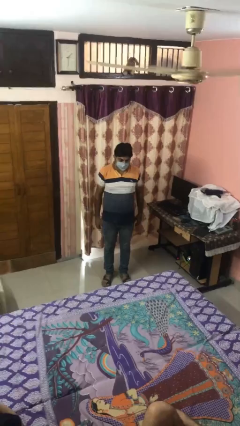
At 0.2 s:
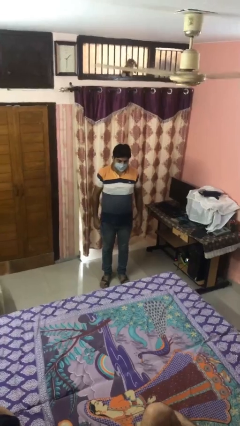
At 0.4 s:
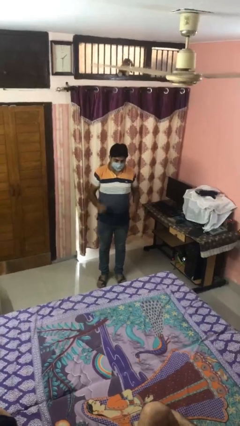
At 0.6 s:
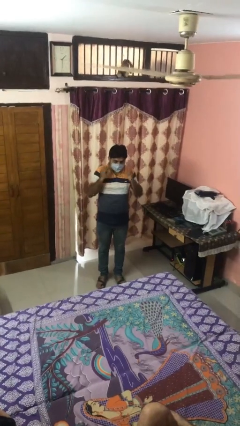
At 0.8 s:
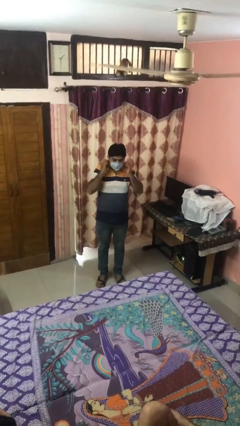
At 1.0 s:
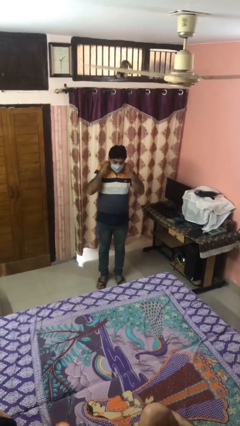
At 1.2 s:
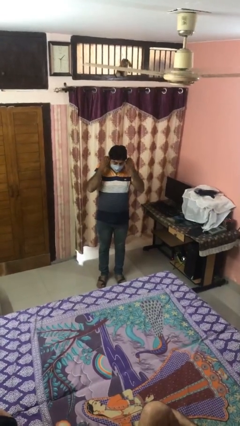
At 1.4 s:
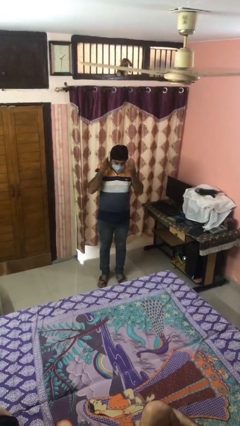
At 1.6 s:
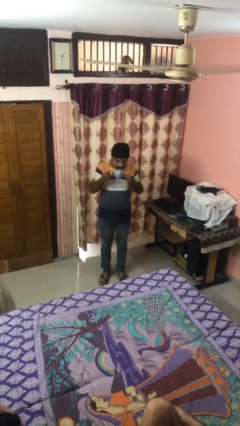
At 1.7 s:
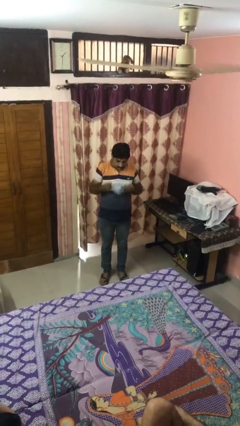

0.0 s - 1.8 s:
person takes off facemask

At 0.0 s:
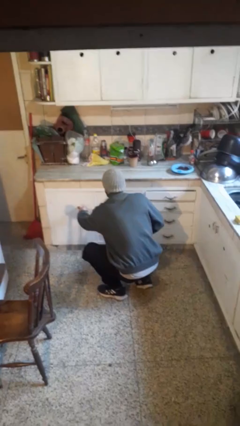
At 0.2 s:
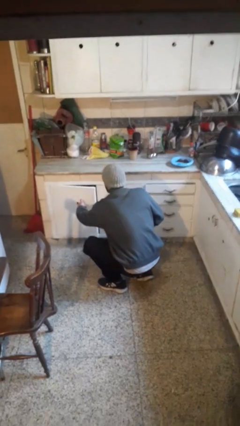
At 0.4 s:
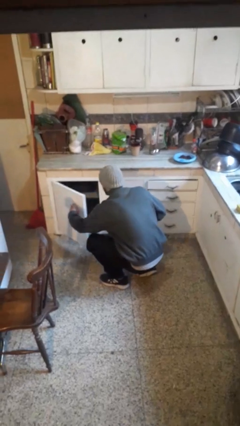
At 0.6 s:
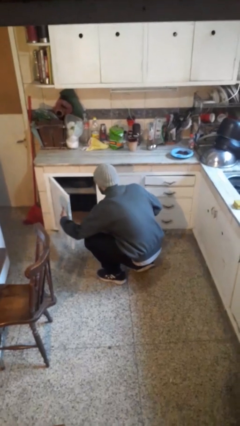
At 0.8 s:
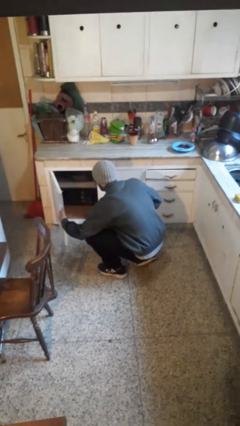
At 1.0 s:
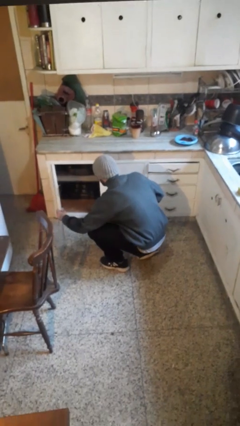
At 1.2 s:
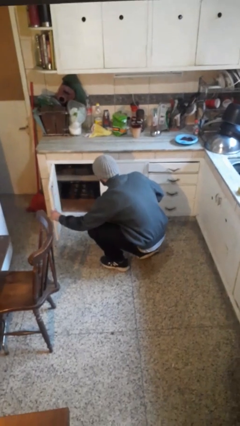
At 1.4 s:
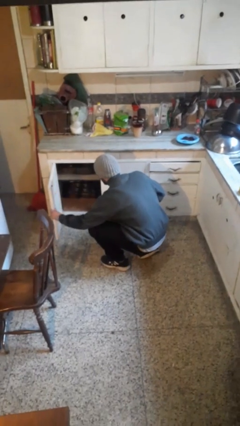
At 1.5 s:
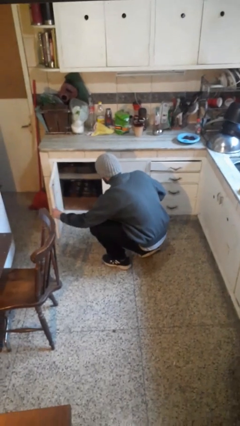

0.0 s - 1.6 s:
person opens cabinet

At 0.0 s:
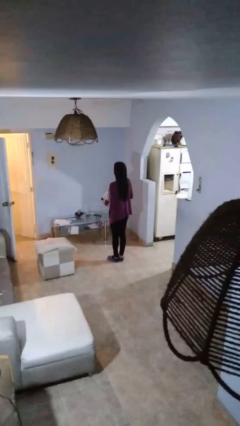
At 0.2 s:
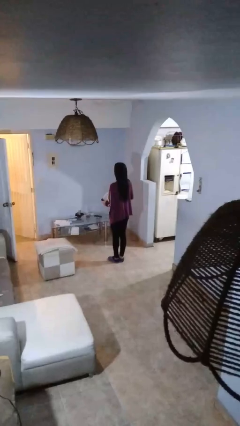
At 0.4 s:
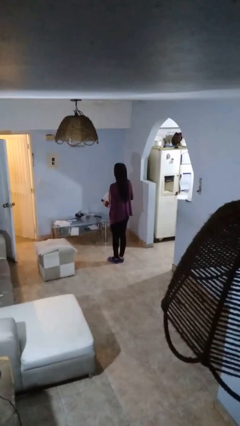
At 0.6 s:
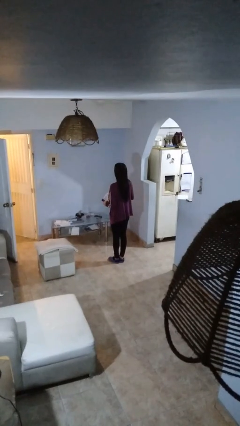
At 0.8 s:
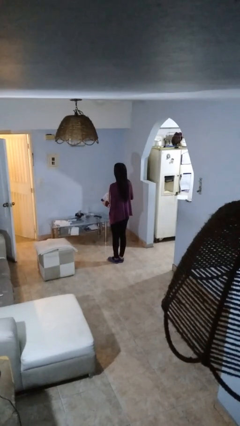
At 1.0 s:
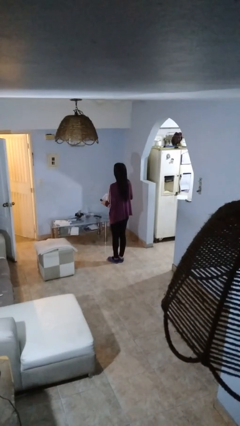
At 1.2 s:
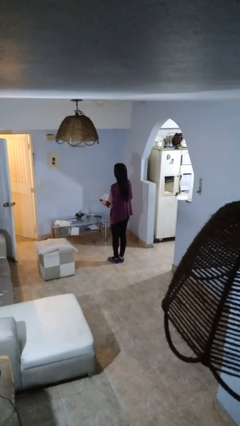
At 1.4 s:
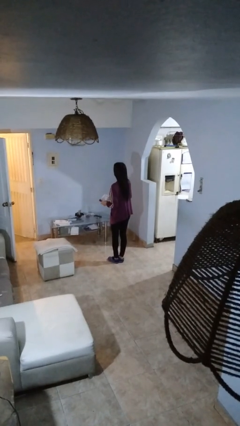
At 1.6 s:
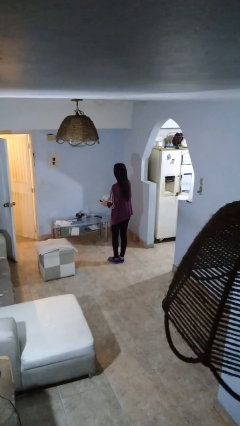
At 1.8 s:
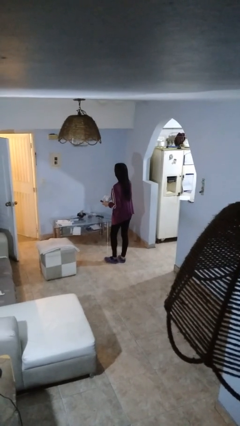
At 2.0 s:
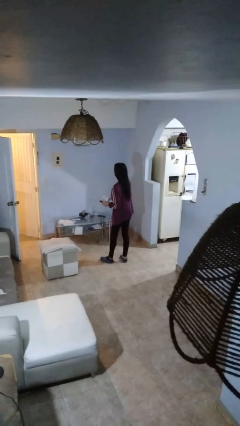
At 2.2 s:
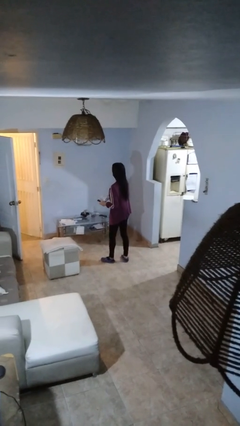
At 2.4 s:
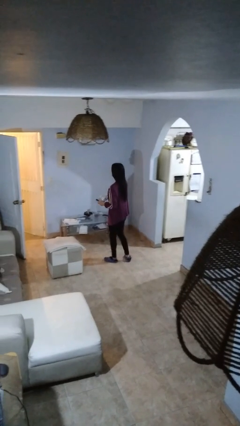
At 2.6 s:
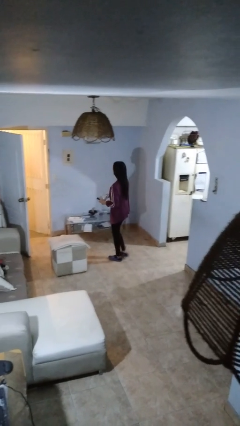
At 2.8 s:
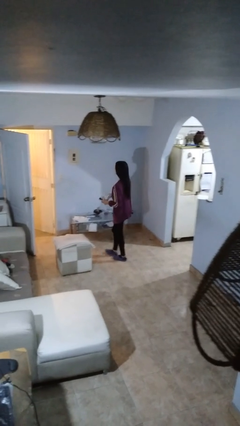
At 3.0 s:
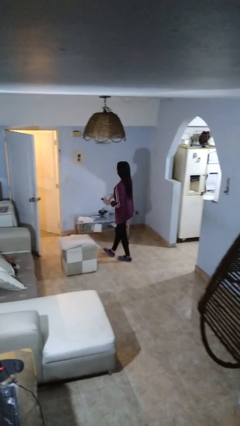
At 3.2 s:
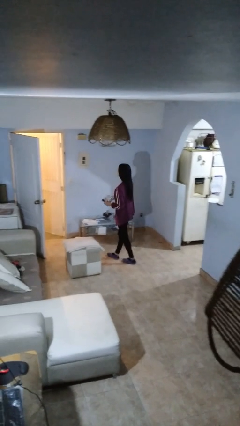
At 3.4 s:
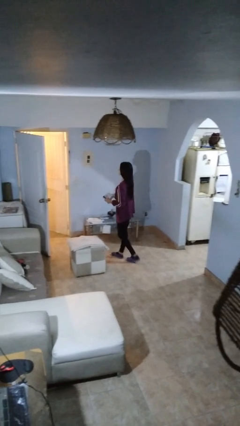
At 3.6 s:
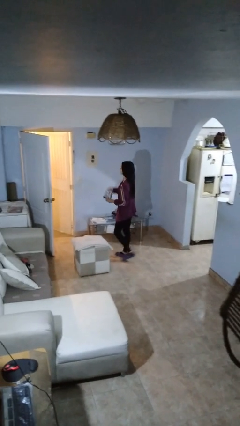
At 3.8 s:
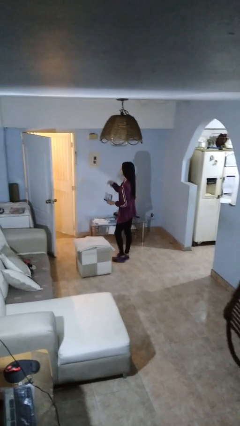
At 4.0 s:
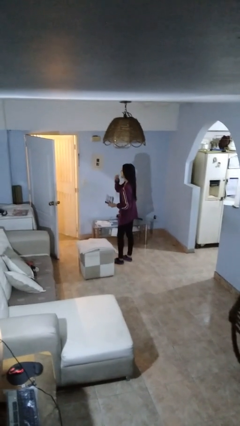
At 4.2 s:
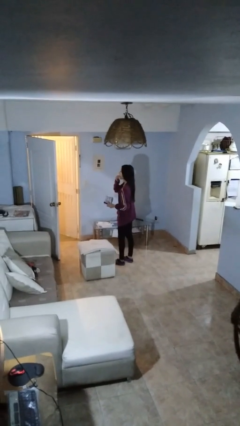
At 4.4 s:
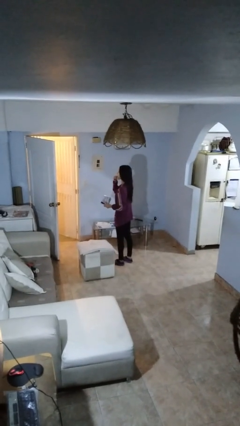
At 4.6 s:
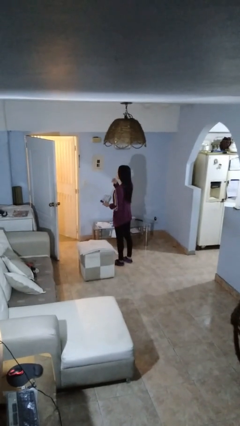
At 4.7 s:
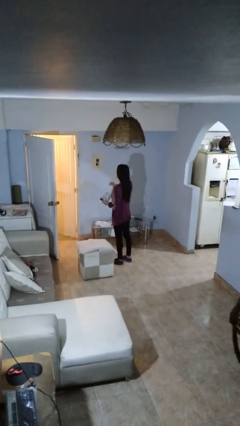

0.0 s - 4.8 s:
person eats snack from bag

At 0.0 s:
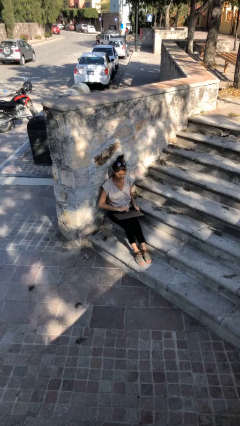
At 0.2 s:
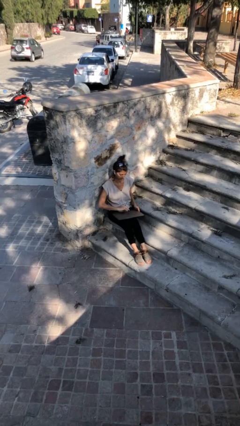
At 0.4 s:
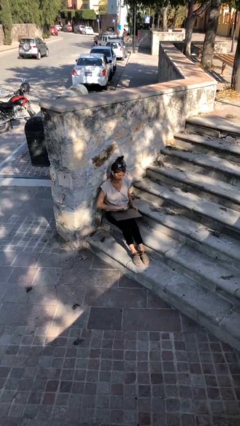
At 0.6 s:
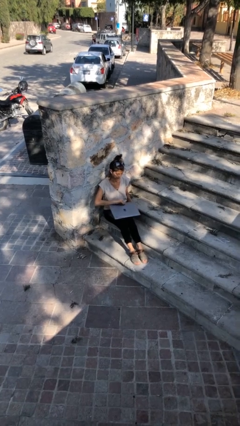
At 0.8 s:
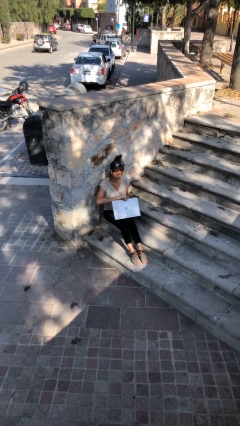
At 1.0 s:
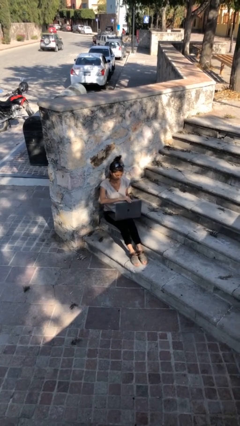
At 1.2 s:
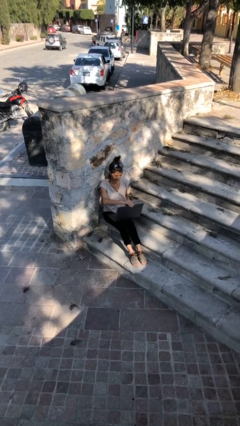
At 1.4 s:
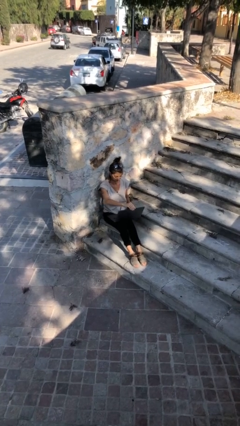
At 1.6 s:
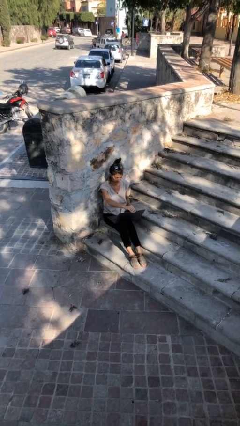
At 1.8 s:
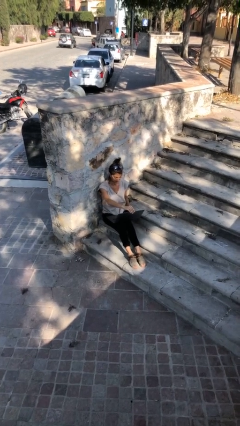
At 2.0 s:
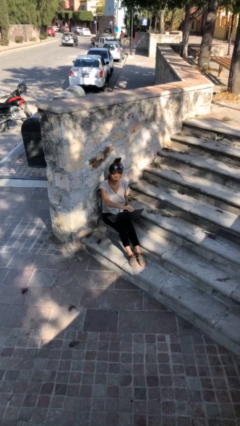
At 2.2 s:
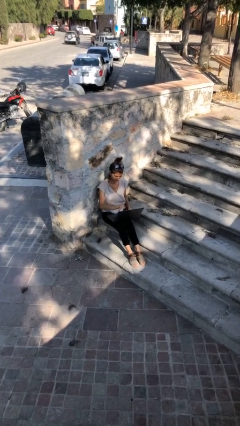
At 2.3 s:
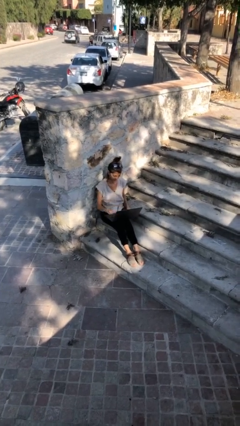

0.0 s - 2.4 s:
person interacts with laptop

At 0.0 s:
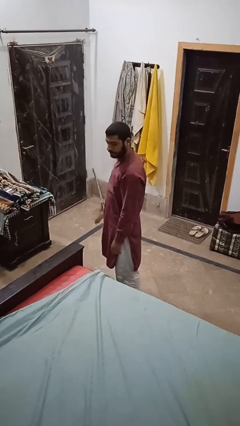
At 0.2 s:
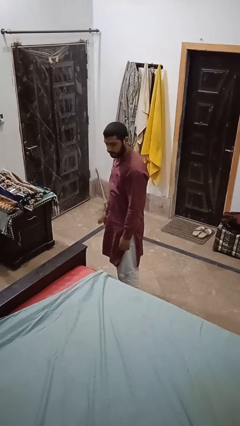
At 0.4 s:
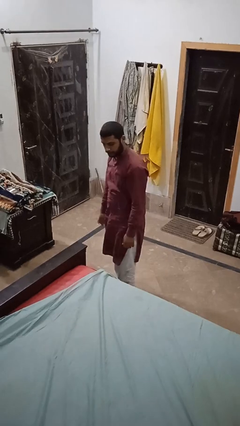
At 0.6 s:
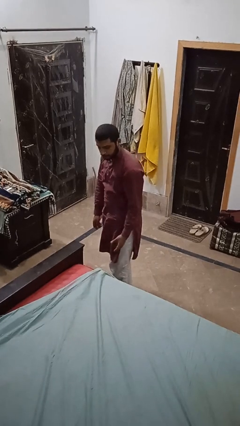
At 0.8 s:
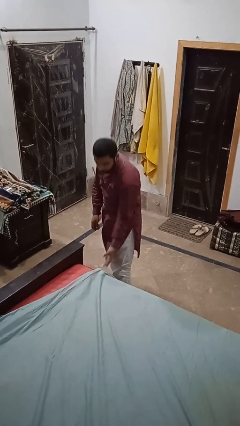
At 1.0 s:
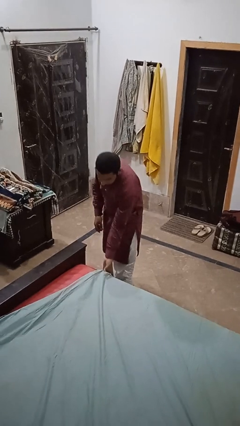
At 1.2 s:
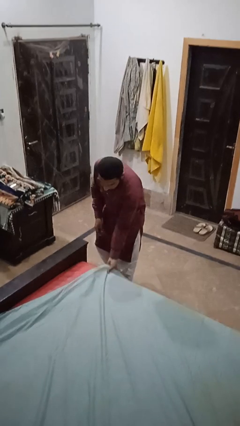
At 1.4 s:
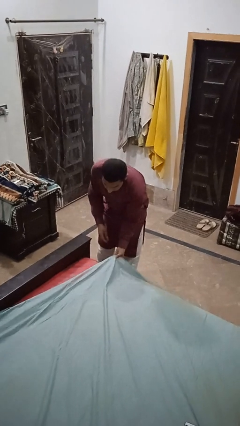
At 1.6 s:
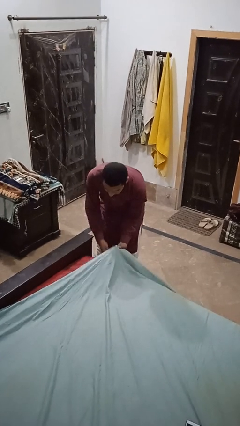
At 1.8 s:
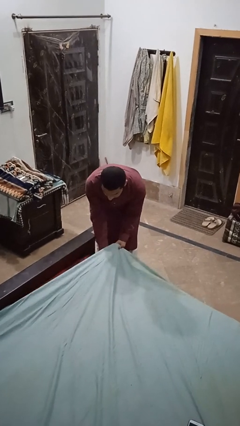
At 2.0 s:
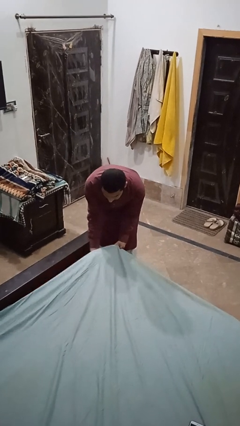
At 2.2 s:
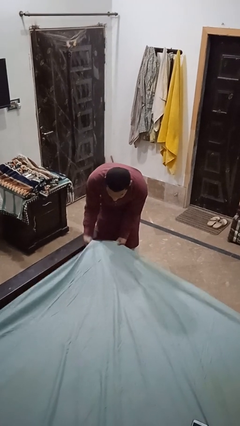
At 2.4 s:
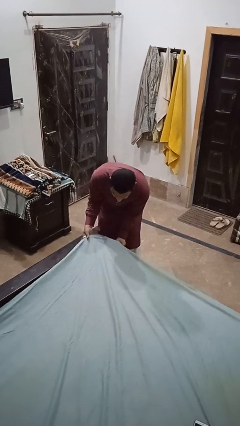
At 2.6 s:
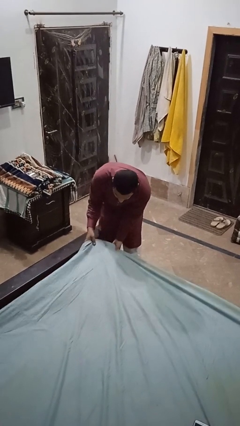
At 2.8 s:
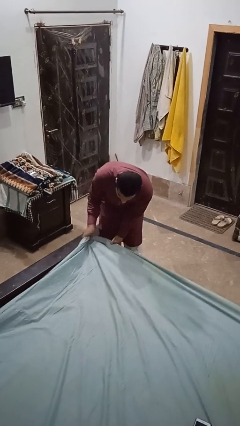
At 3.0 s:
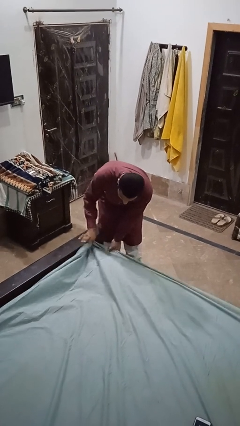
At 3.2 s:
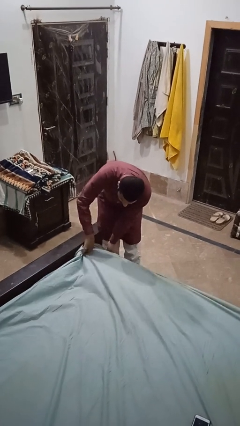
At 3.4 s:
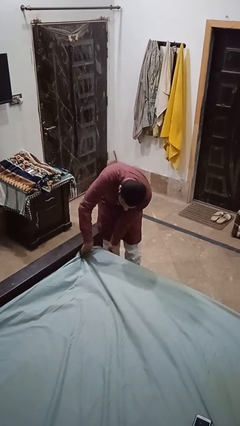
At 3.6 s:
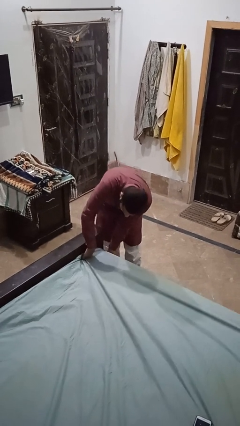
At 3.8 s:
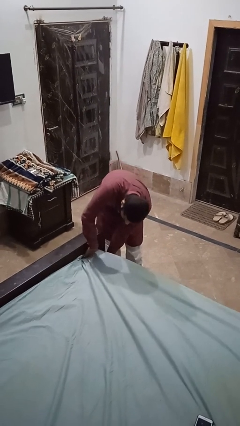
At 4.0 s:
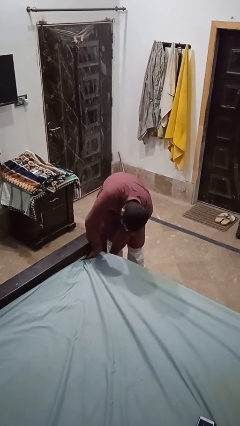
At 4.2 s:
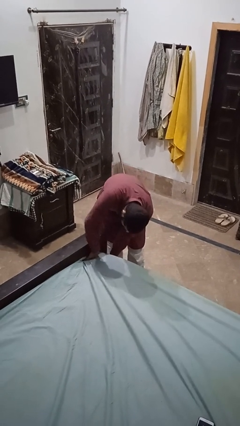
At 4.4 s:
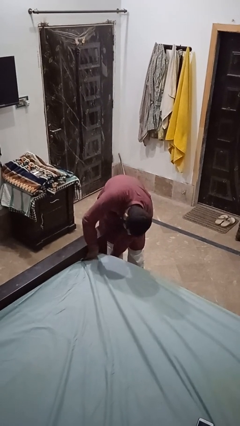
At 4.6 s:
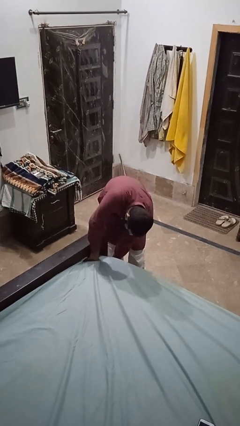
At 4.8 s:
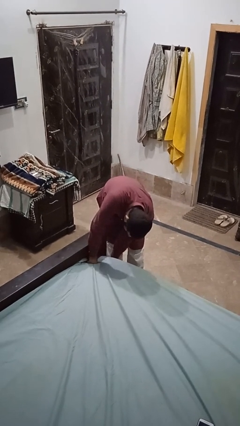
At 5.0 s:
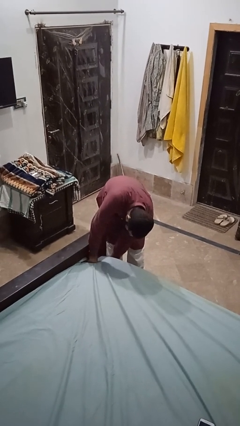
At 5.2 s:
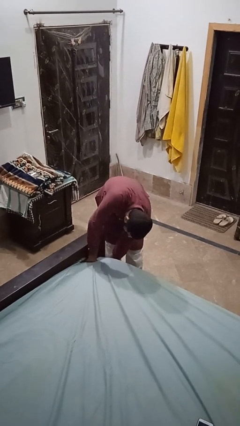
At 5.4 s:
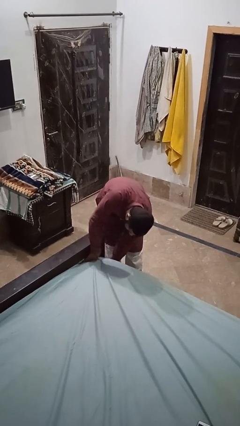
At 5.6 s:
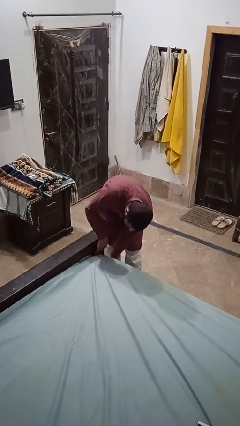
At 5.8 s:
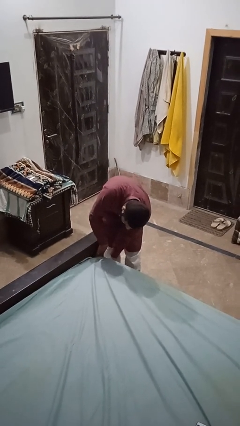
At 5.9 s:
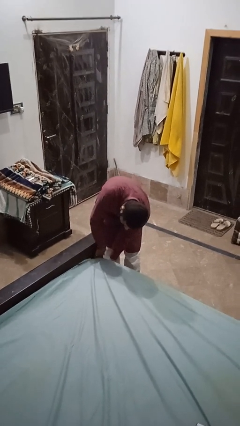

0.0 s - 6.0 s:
person makes bed

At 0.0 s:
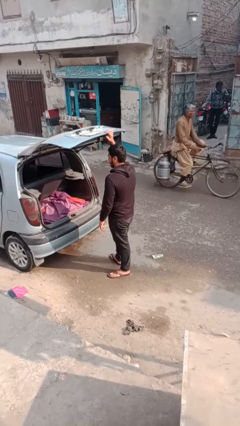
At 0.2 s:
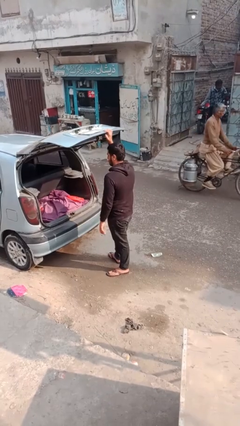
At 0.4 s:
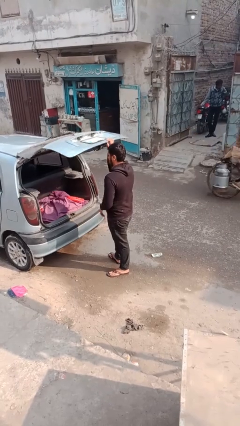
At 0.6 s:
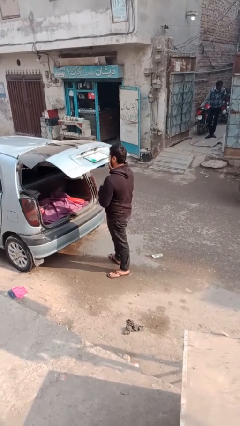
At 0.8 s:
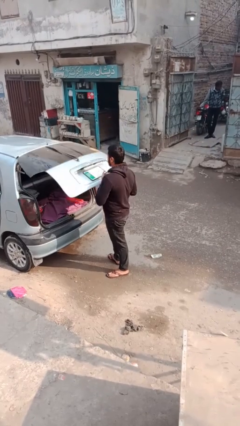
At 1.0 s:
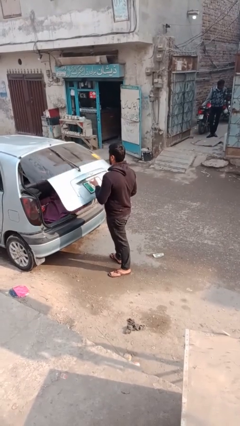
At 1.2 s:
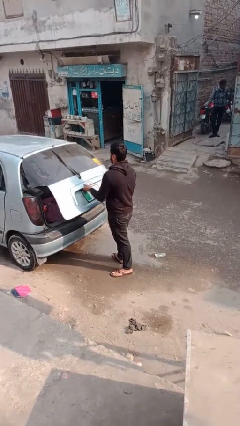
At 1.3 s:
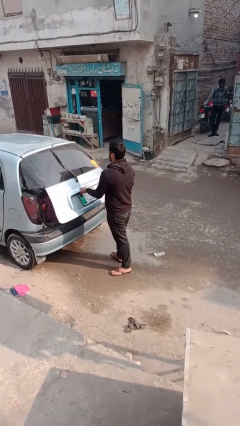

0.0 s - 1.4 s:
person closes car trunk
